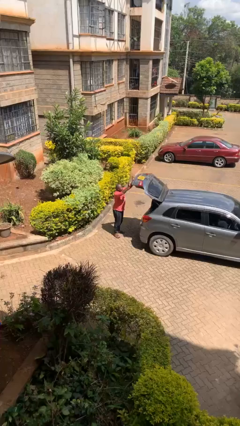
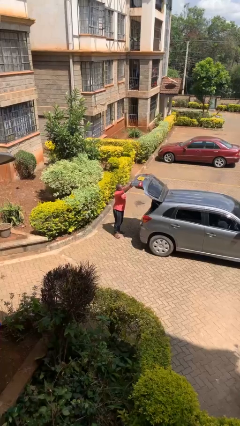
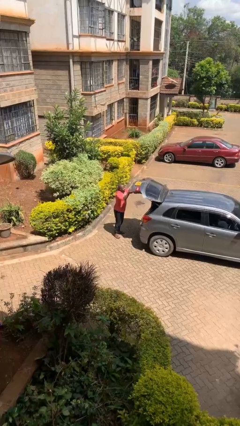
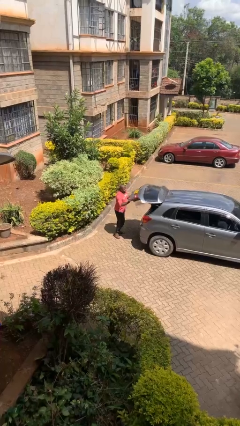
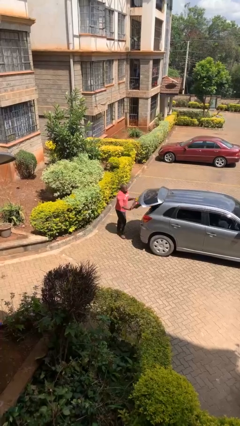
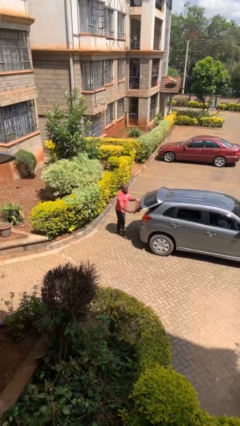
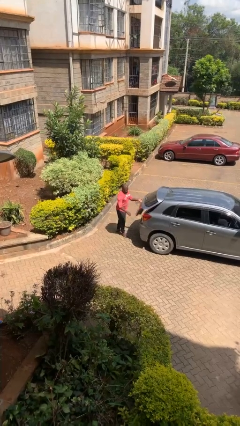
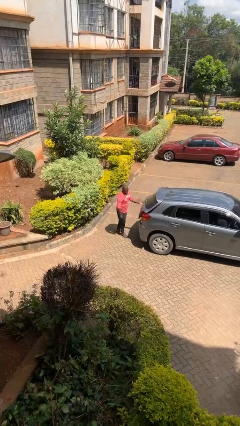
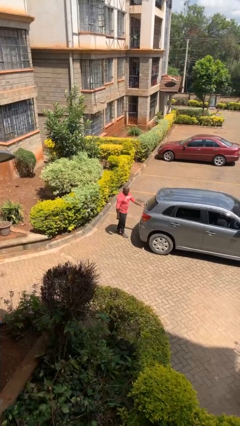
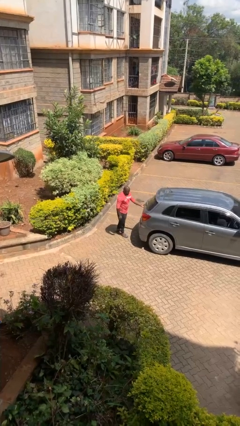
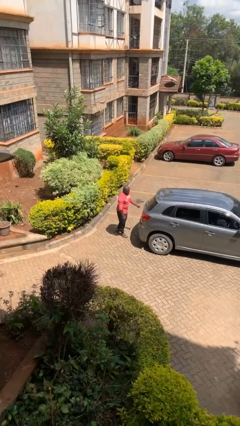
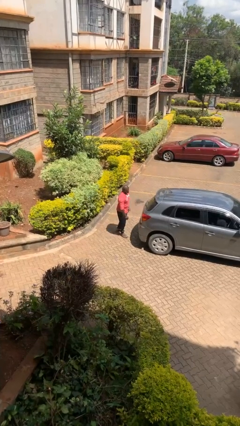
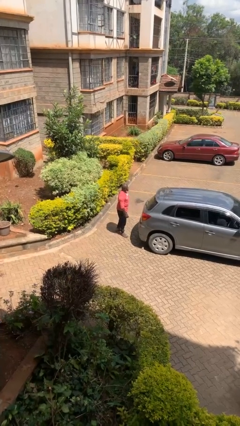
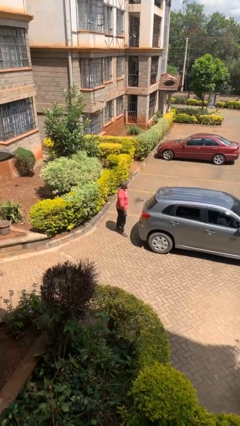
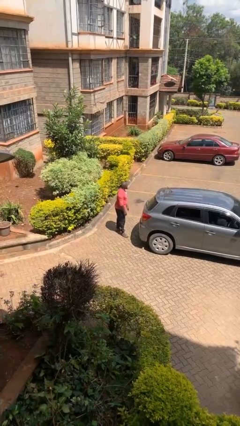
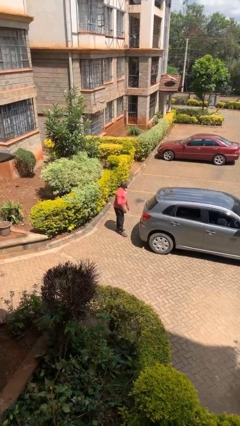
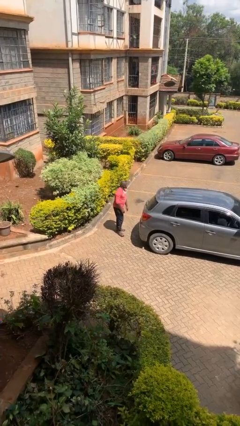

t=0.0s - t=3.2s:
person closes car trunk

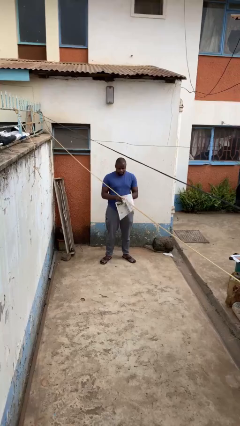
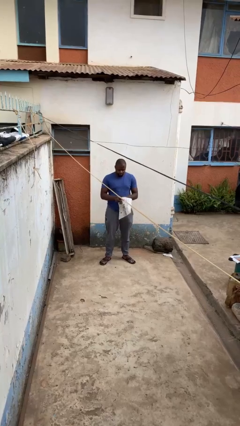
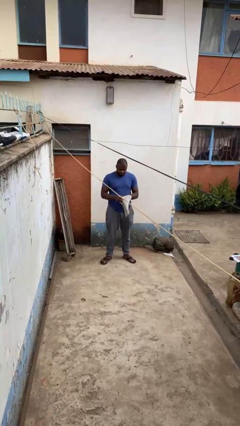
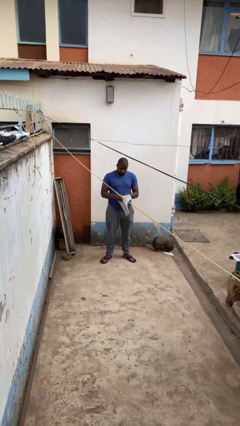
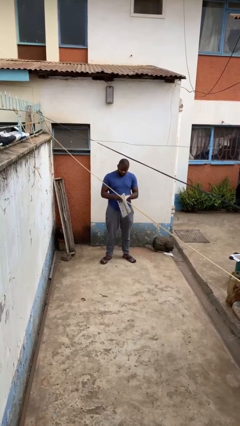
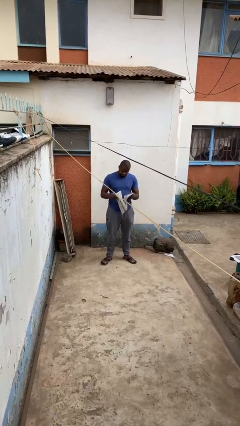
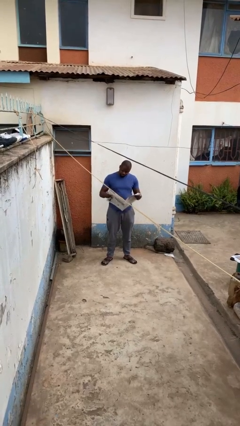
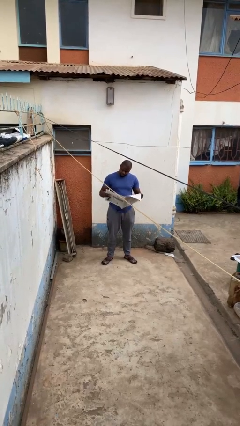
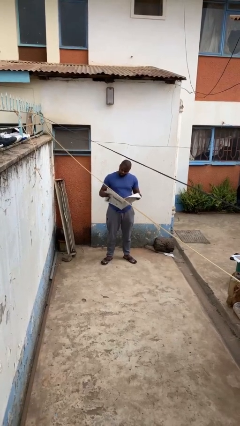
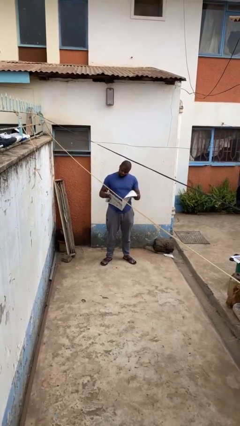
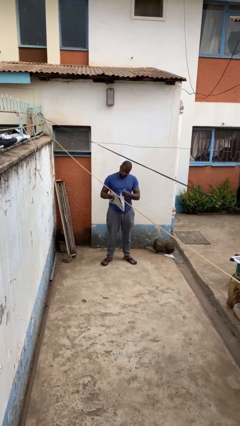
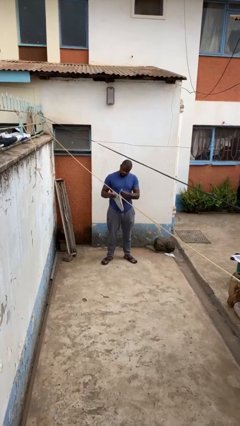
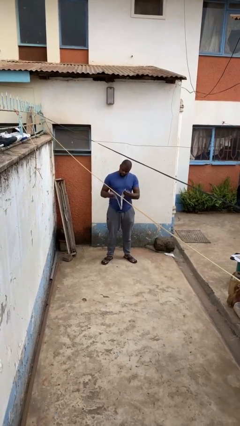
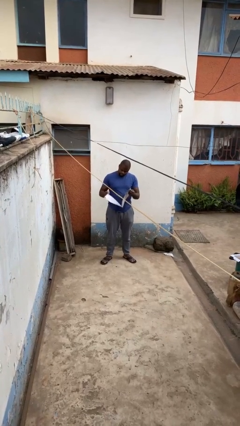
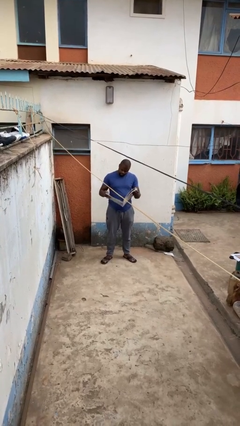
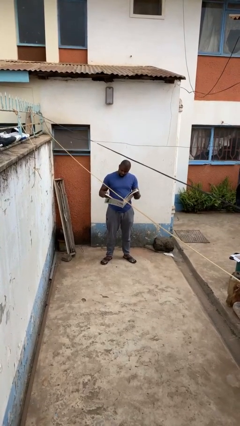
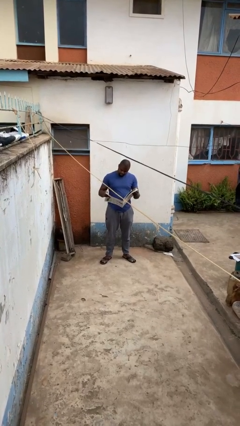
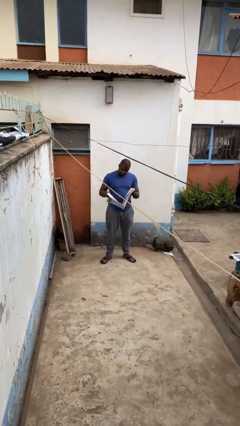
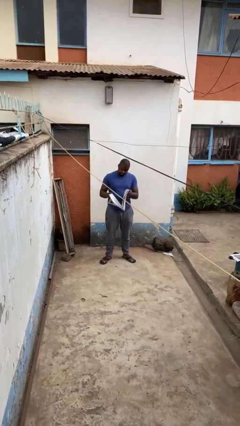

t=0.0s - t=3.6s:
person reads newspaper

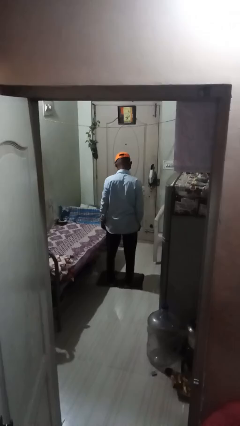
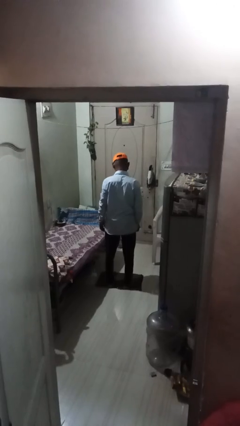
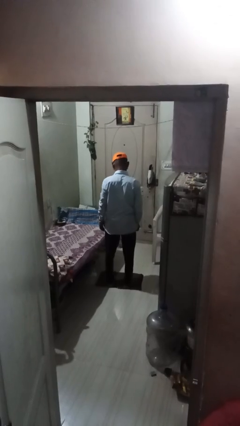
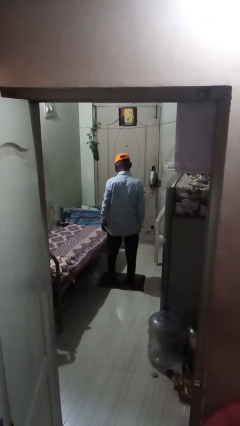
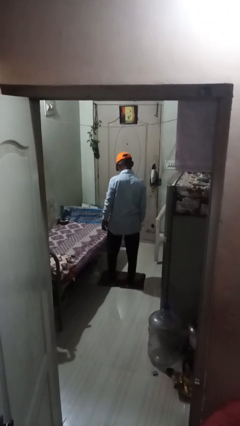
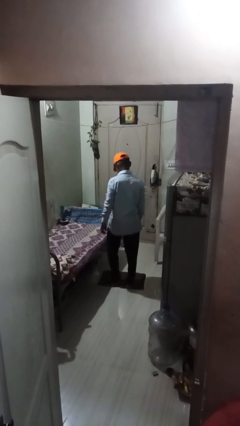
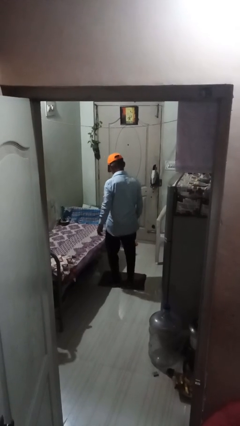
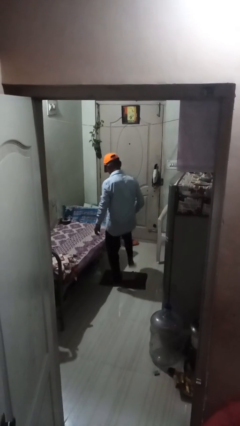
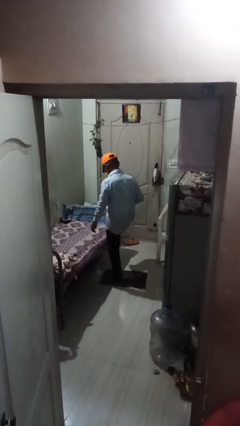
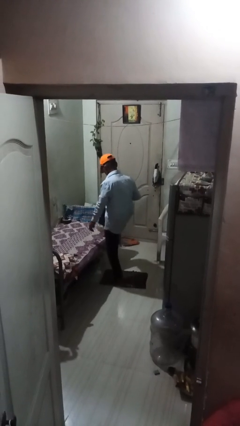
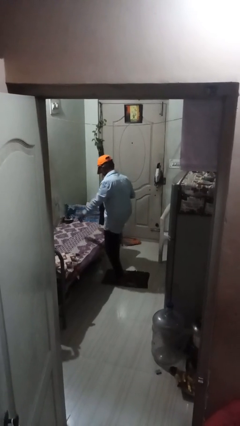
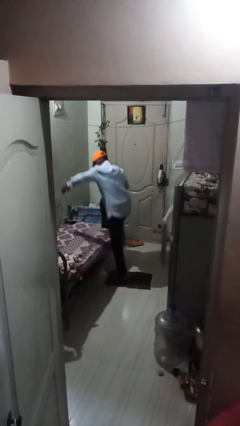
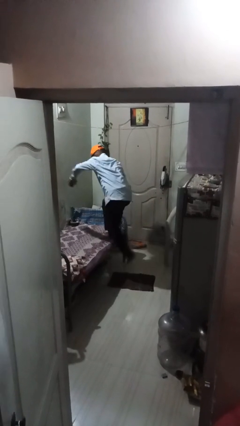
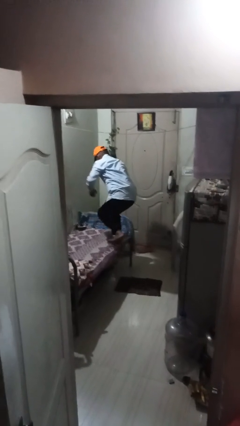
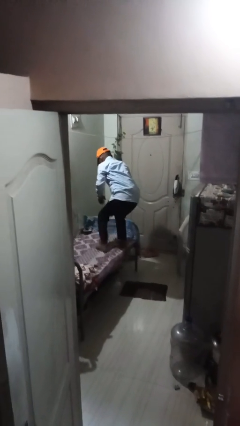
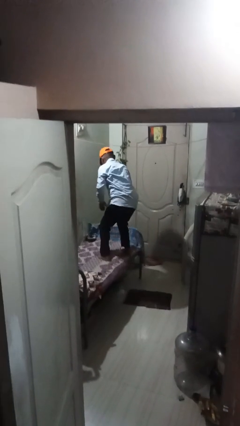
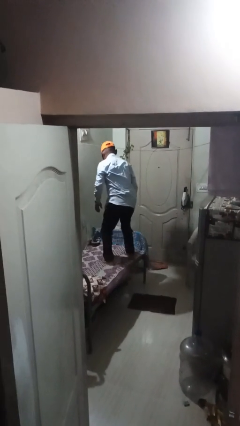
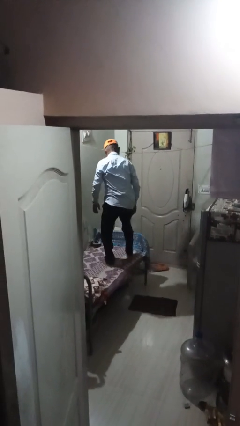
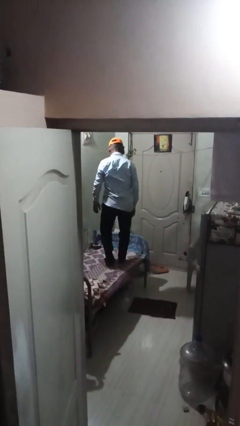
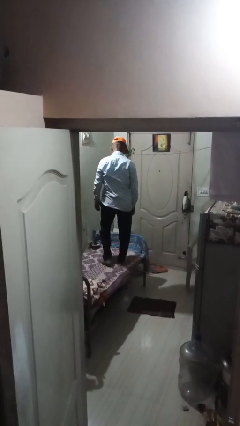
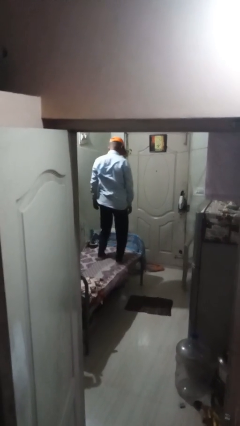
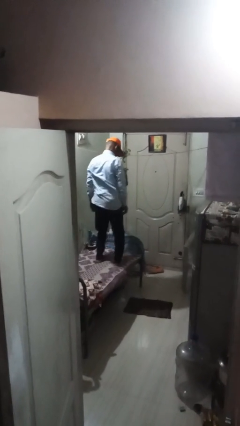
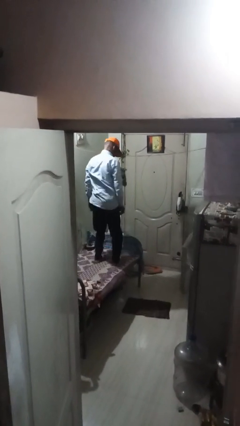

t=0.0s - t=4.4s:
person climbs on couch

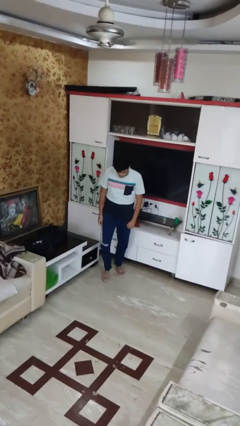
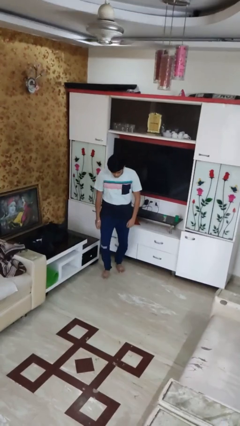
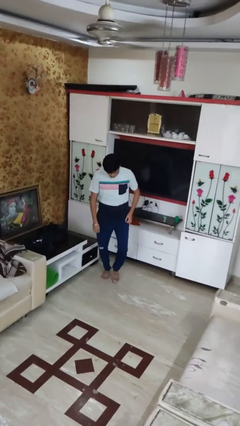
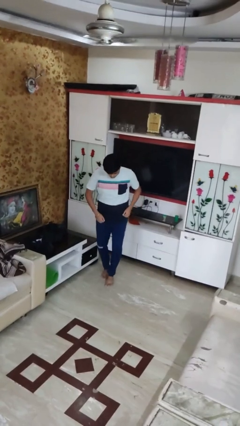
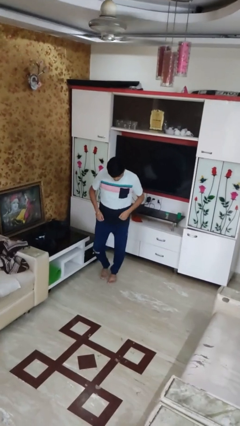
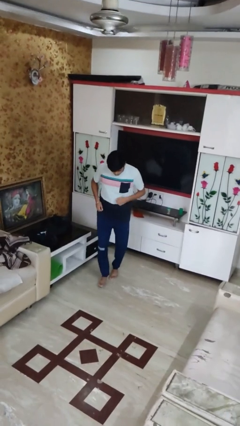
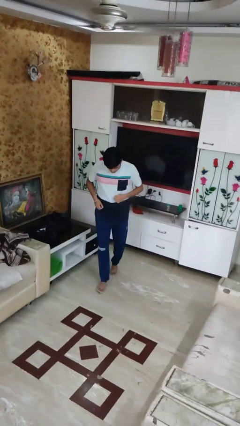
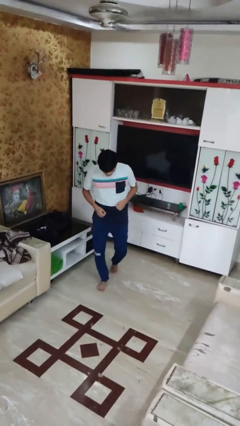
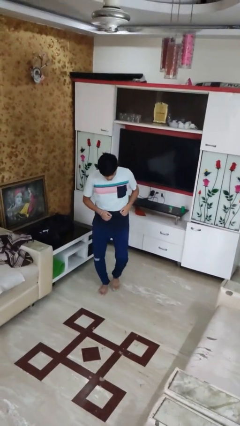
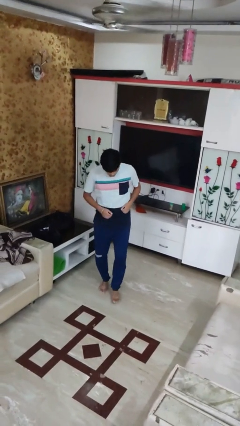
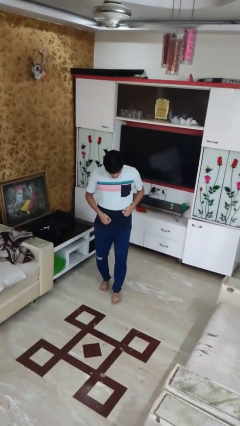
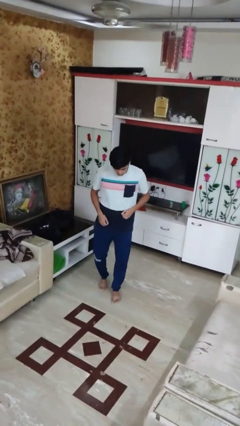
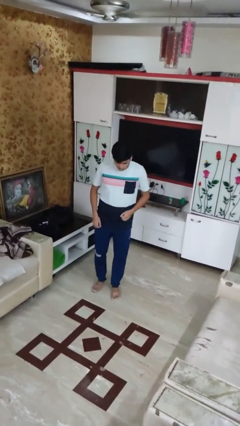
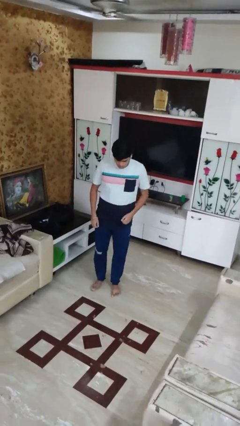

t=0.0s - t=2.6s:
person walks tiptoe

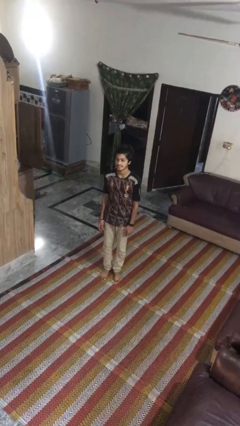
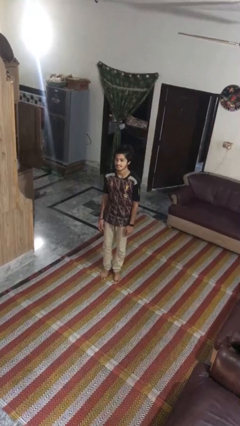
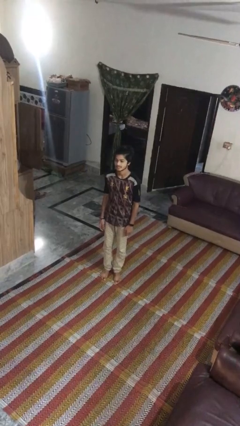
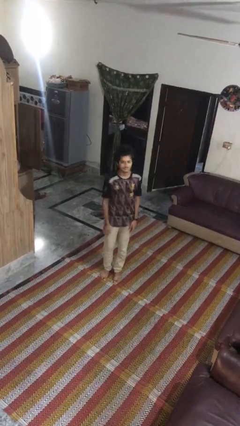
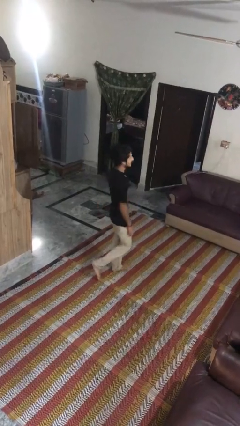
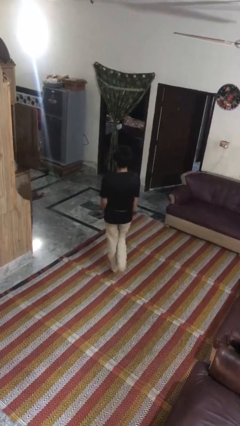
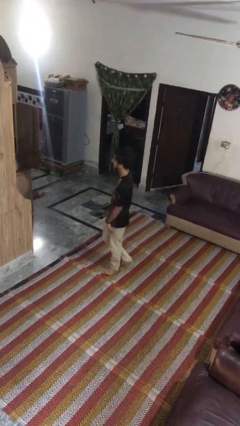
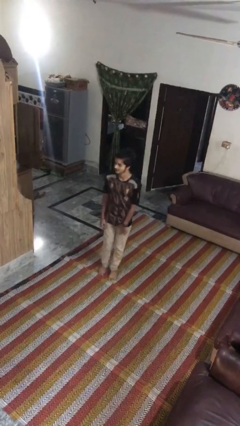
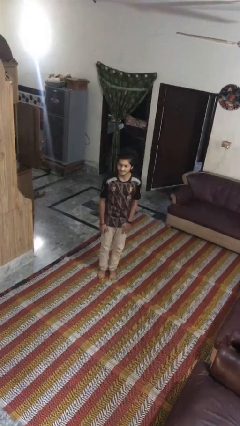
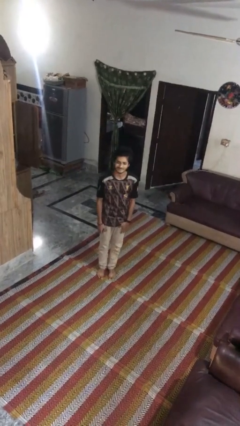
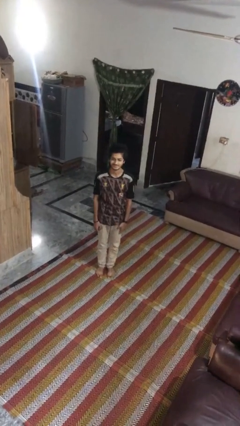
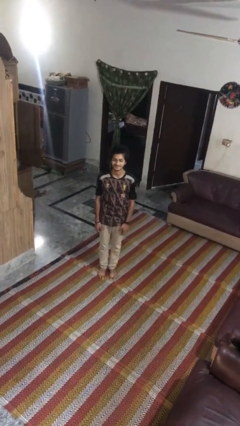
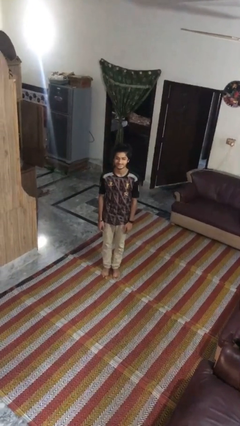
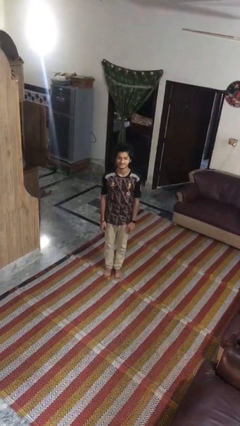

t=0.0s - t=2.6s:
person twirls

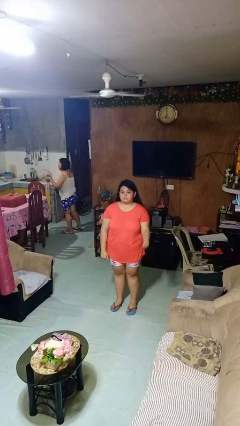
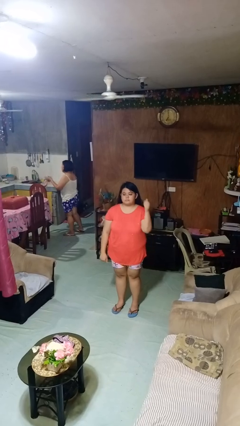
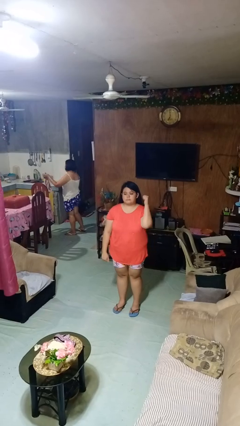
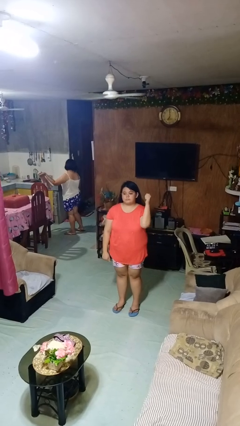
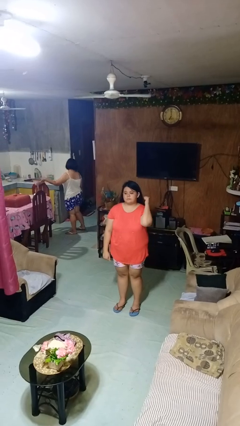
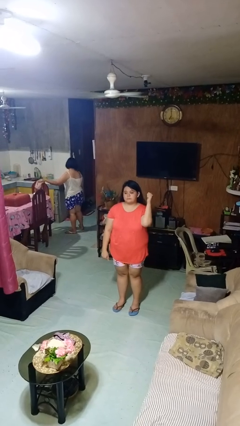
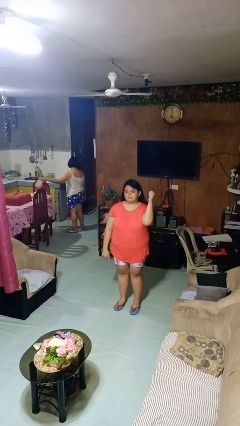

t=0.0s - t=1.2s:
person gestures behind me
